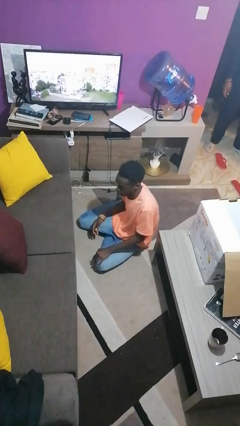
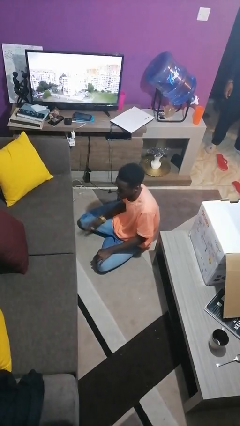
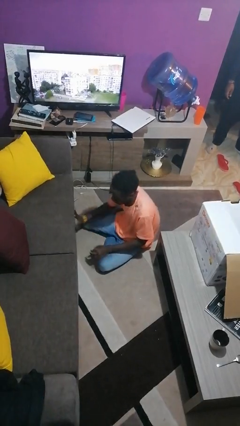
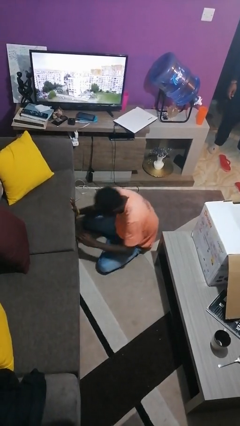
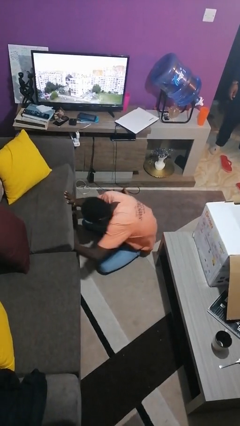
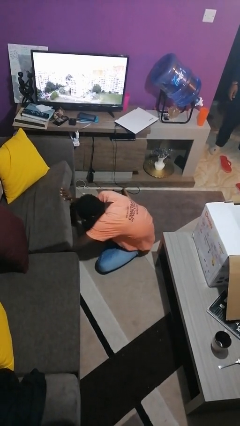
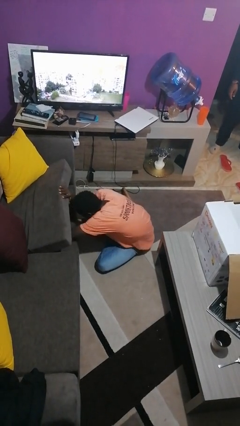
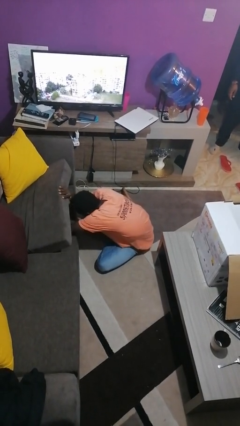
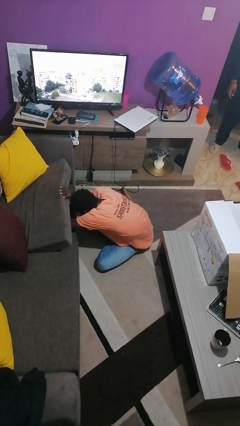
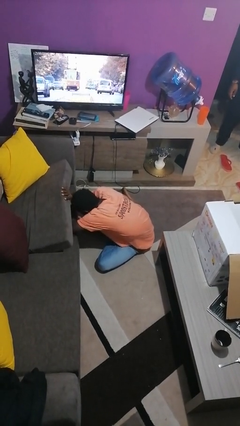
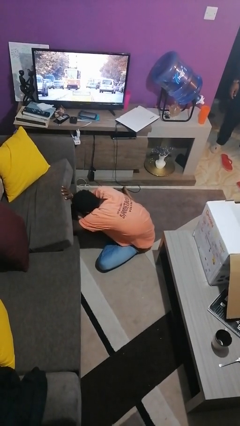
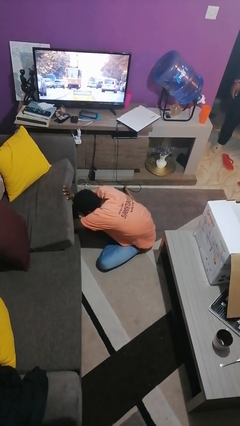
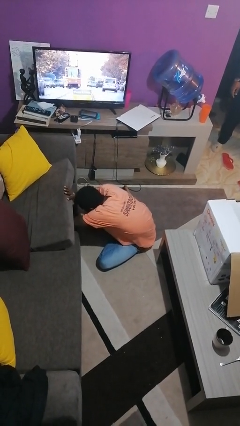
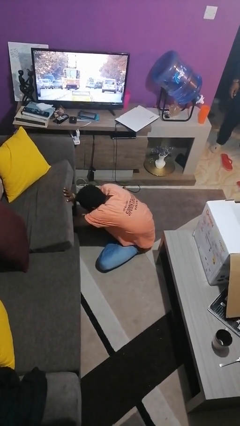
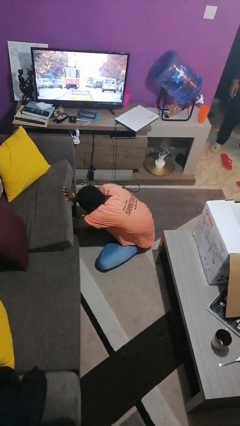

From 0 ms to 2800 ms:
person searches under couch

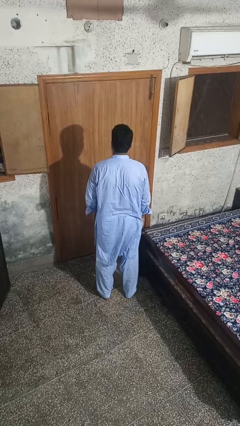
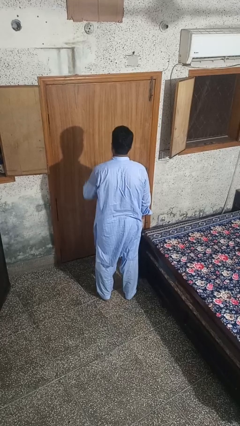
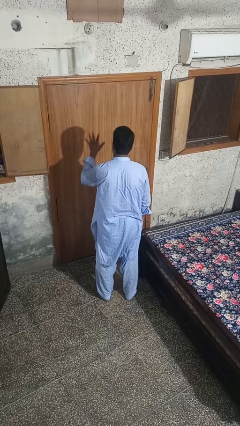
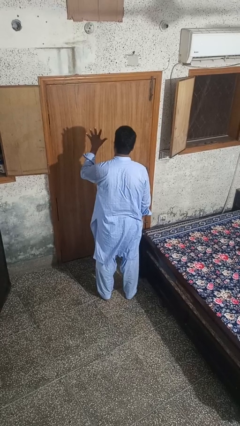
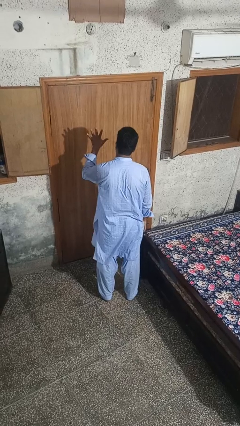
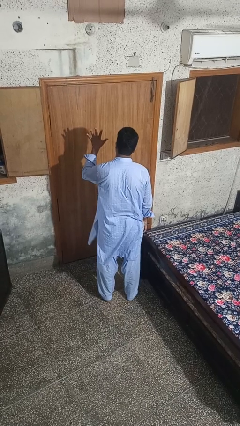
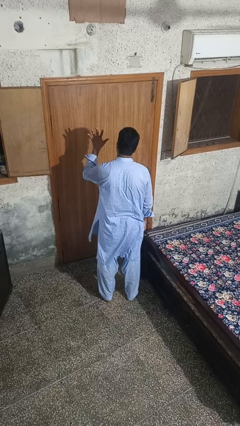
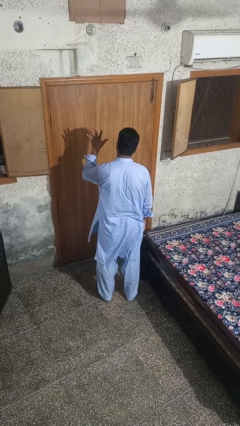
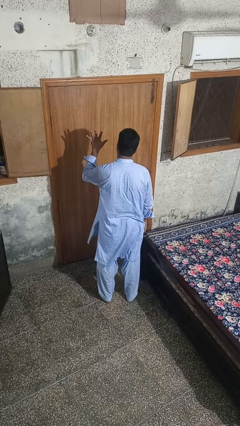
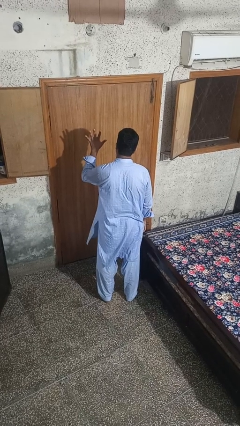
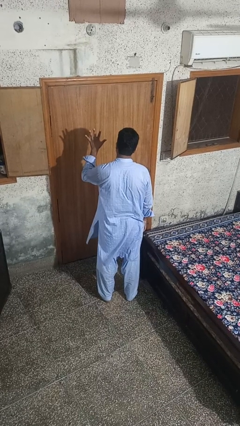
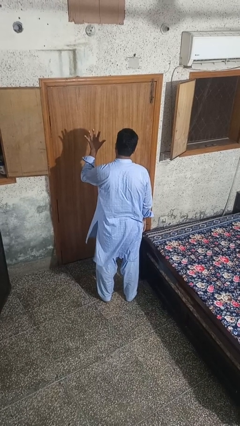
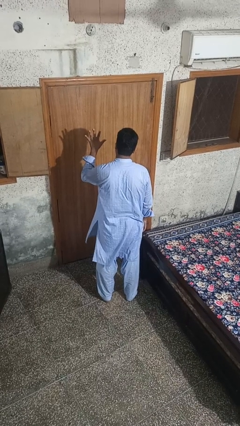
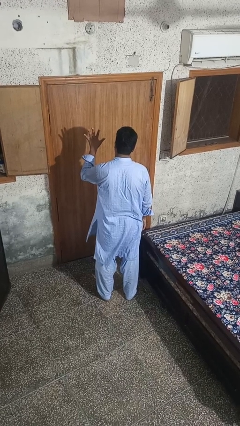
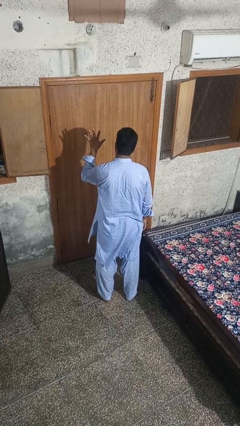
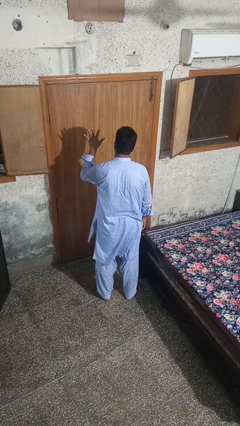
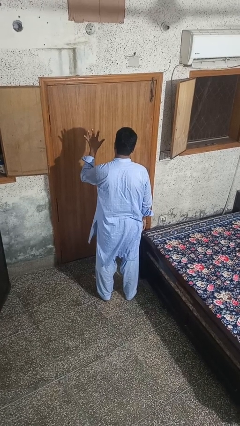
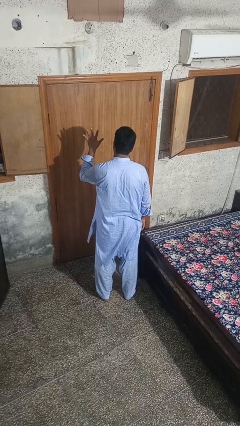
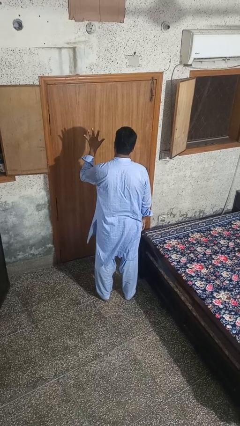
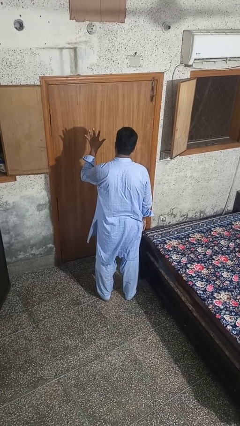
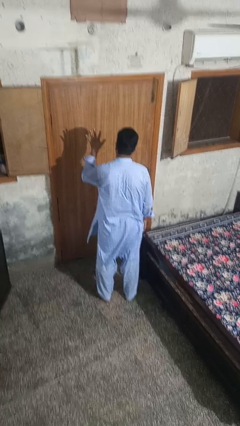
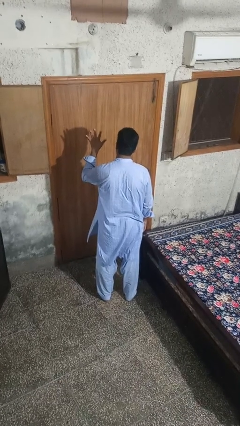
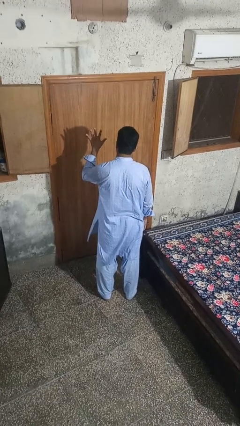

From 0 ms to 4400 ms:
person gestures number five

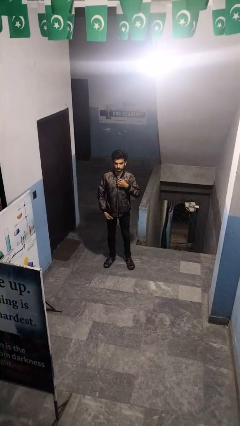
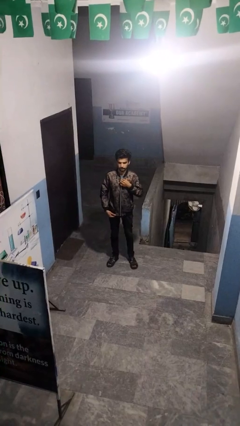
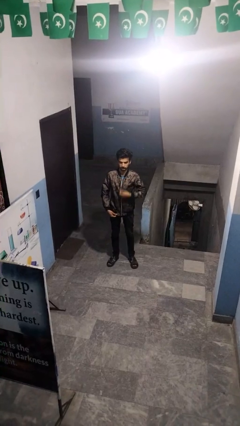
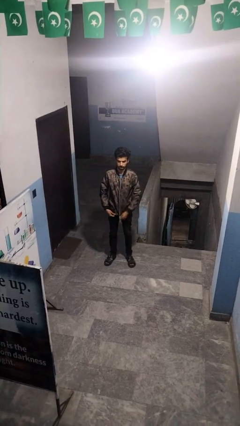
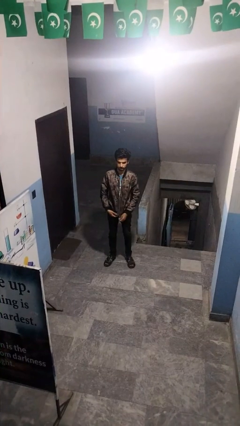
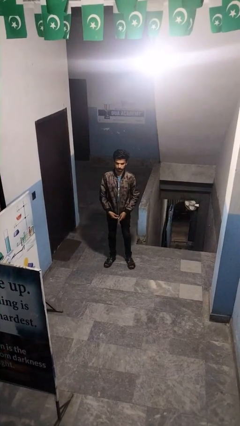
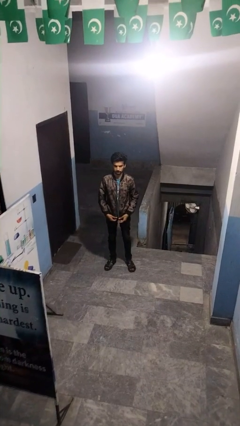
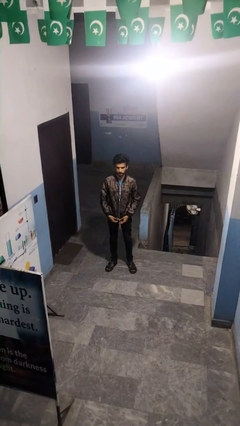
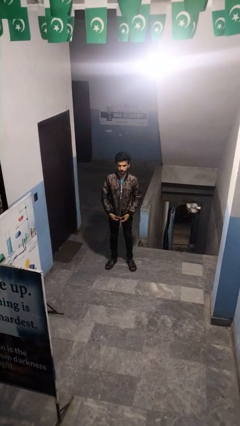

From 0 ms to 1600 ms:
person unzips jacket

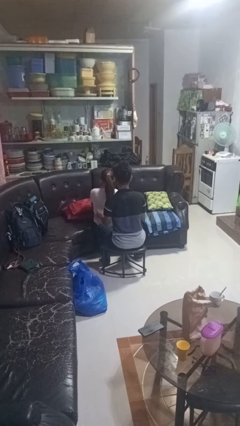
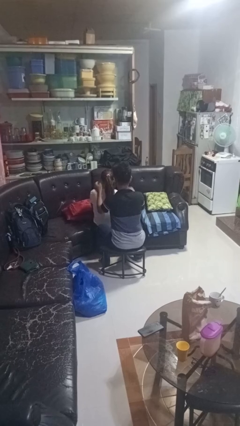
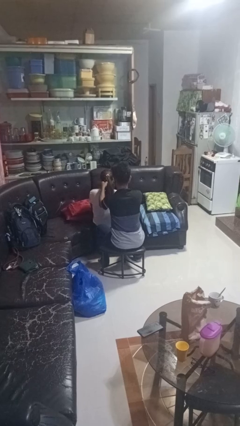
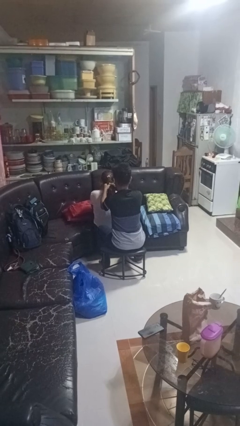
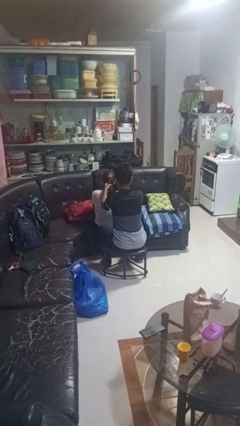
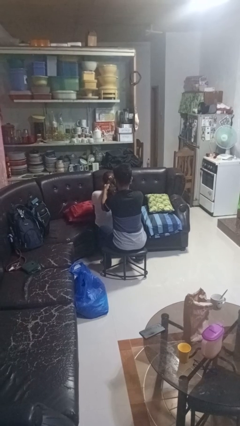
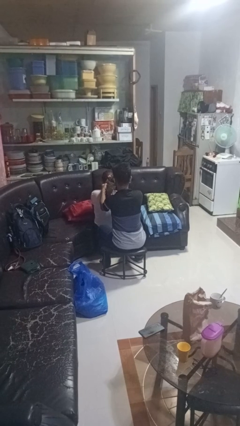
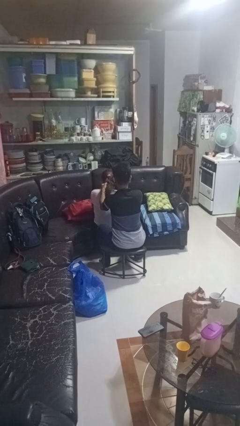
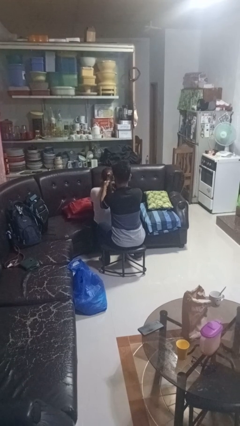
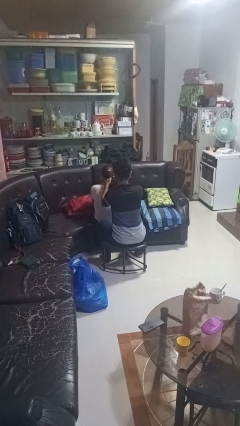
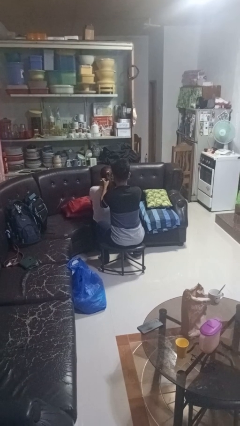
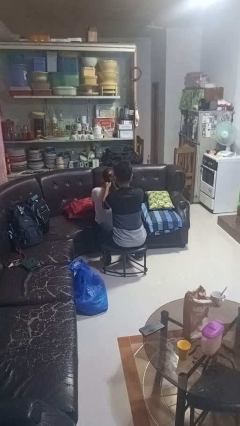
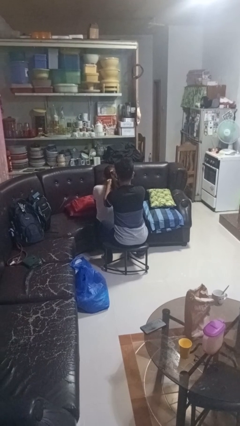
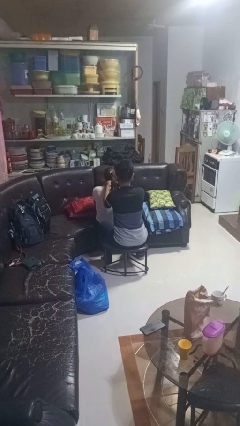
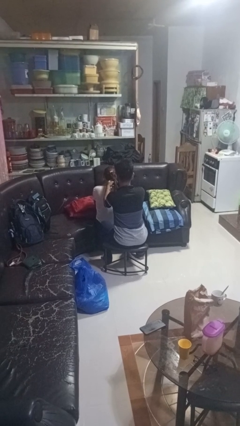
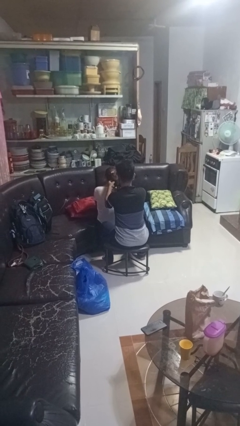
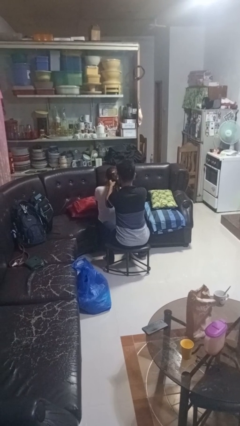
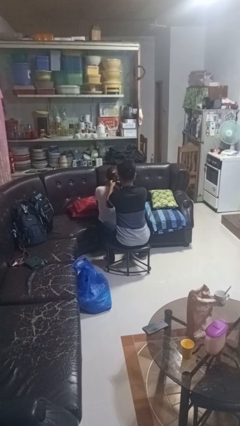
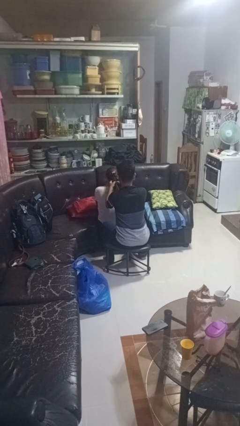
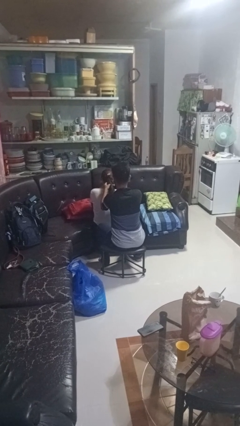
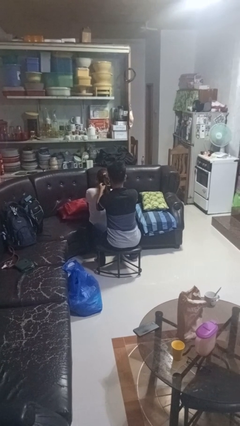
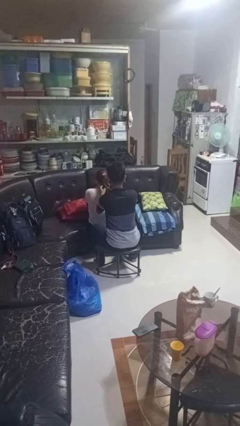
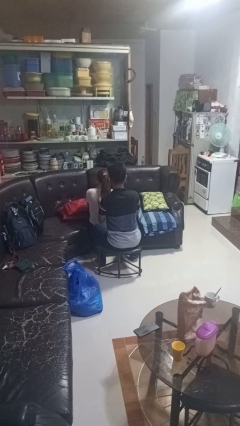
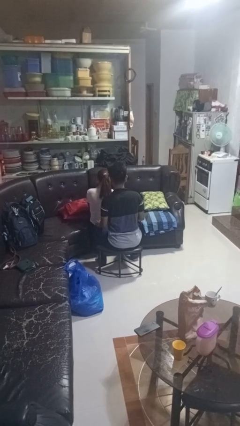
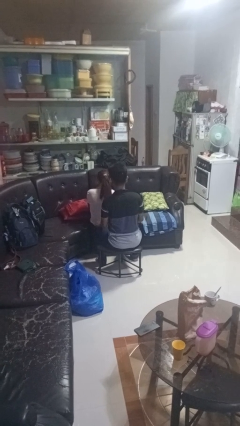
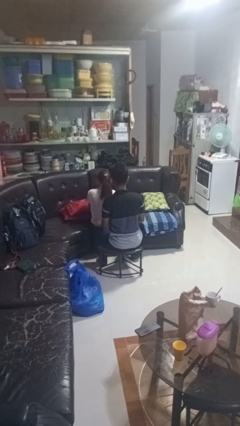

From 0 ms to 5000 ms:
person braids hair of person

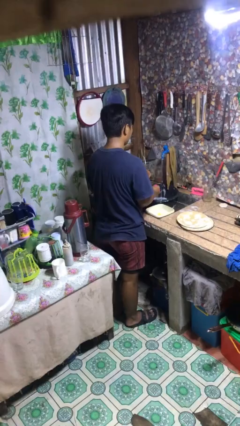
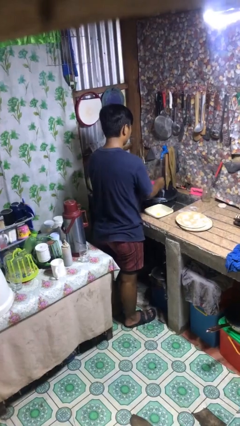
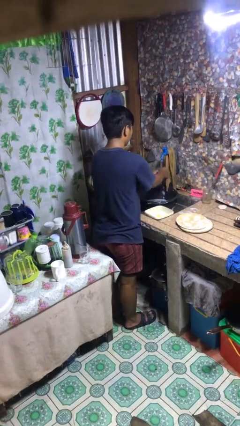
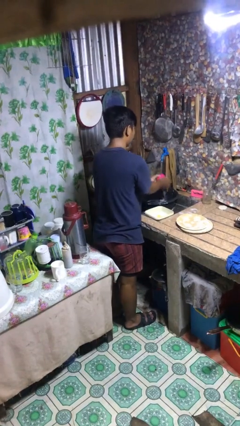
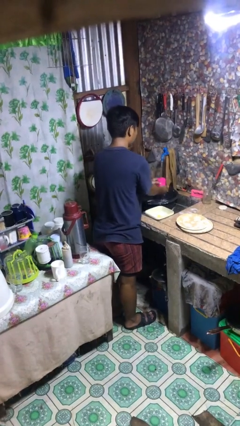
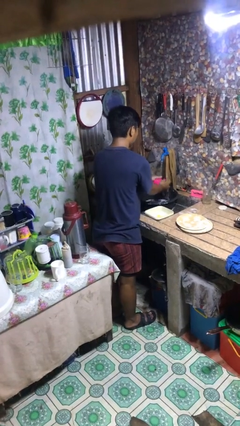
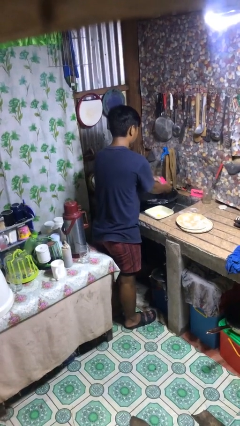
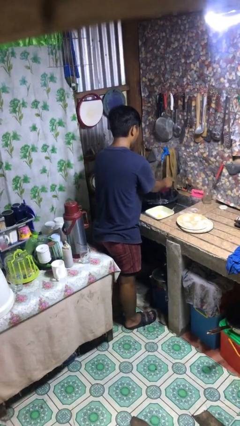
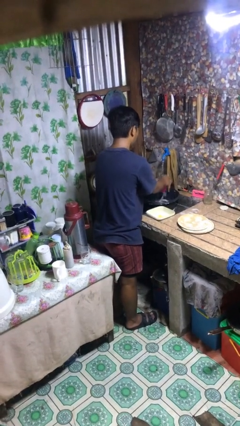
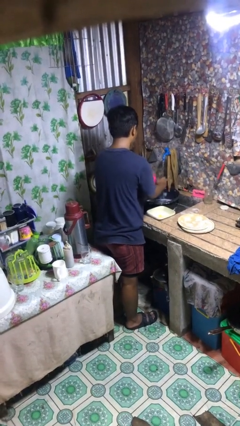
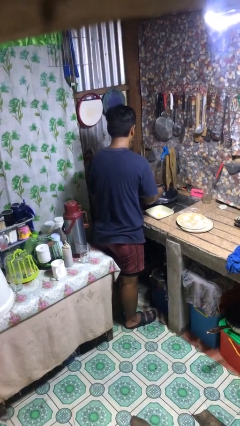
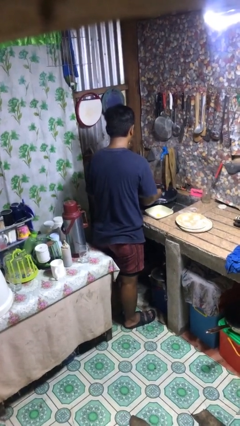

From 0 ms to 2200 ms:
person washes dish

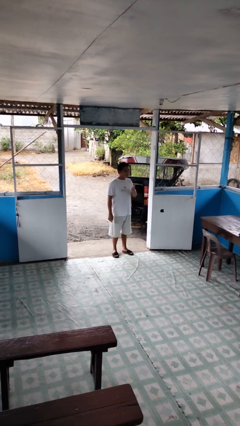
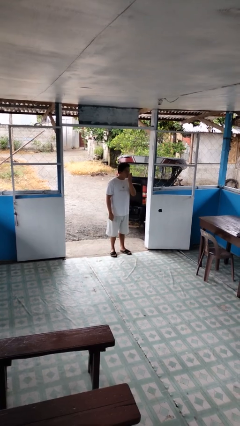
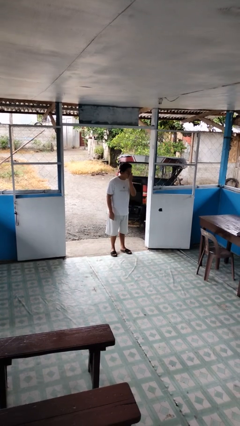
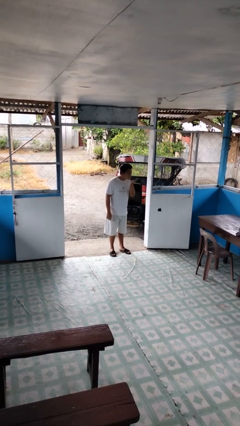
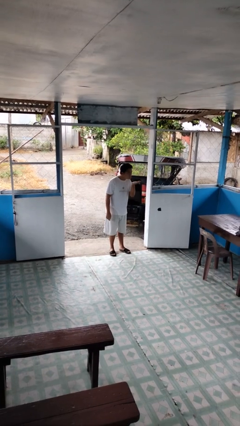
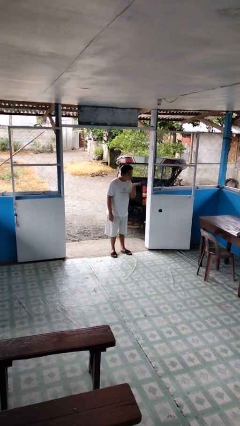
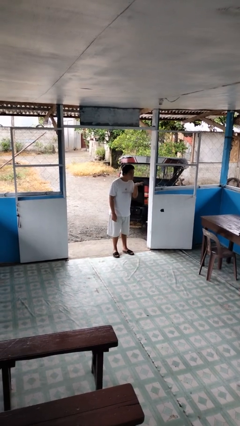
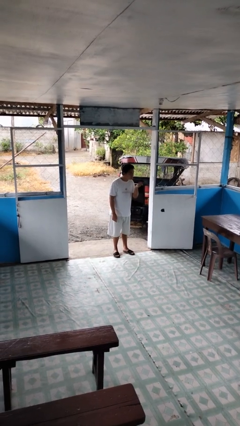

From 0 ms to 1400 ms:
person gestures blow kiss
